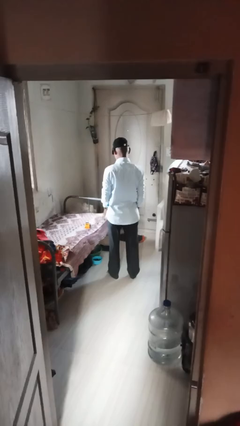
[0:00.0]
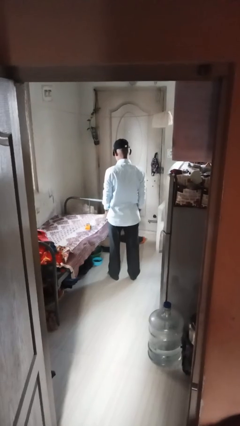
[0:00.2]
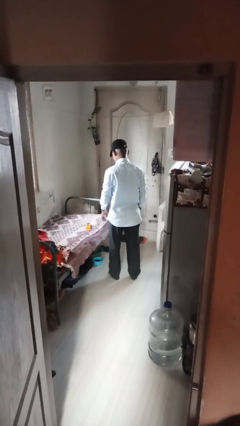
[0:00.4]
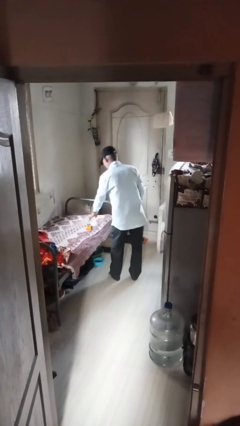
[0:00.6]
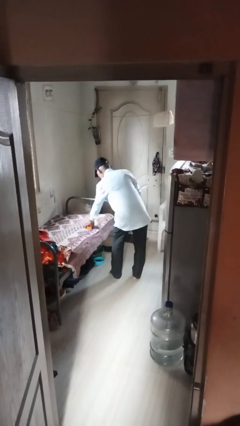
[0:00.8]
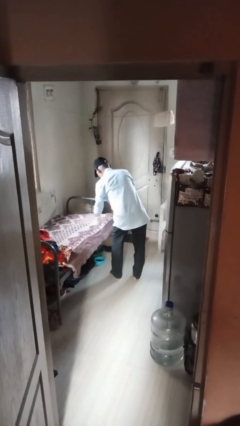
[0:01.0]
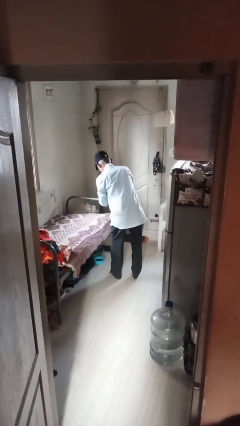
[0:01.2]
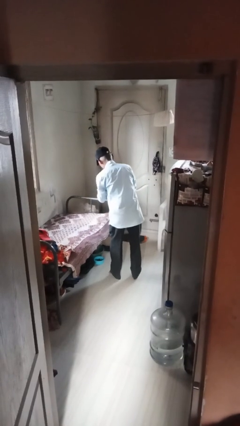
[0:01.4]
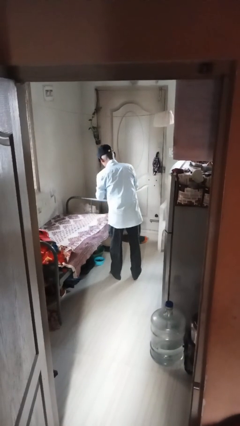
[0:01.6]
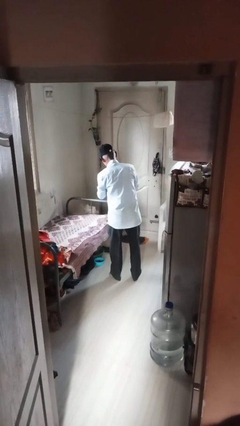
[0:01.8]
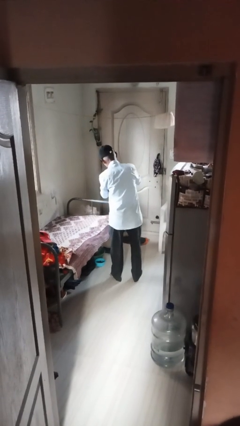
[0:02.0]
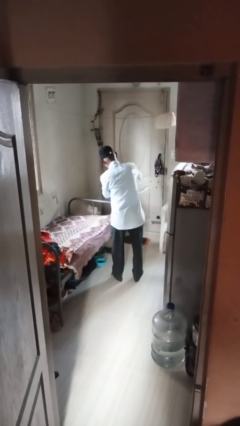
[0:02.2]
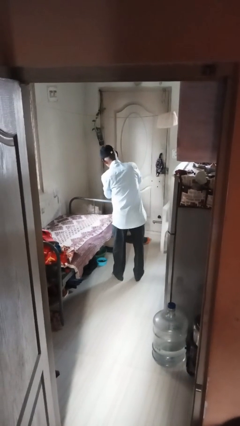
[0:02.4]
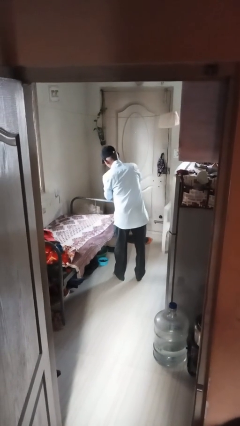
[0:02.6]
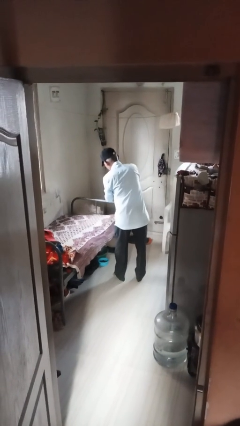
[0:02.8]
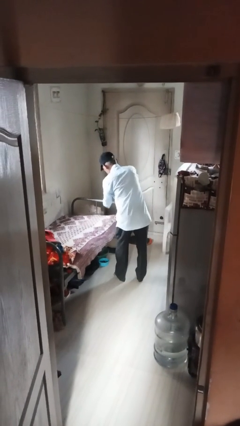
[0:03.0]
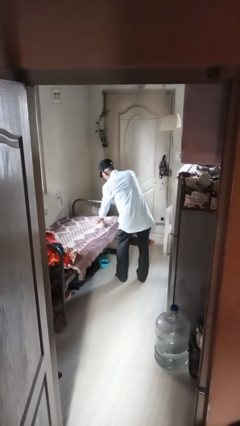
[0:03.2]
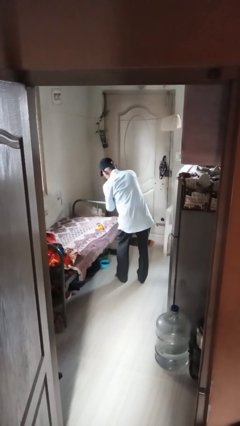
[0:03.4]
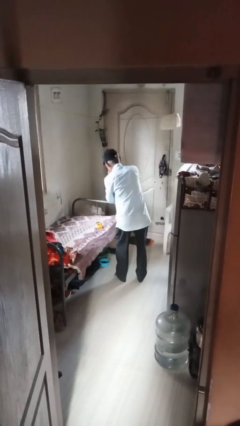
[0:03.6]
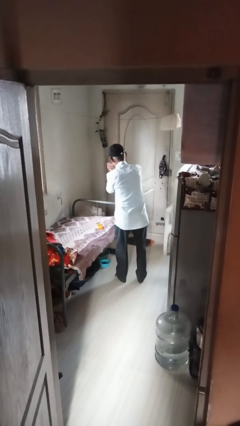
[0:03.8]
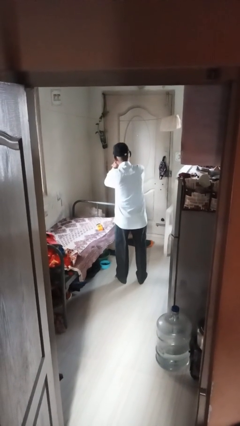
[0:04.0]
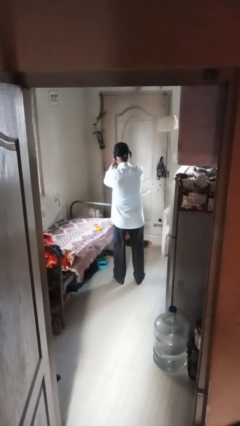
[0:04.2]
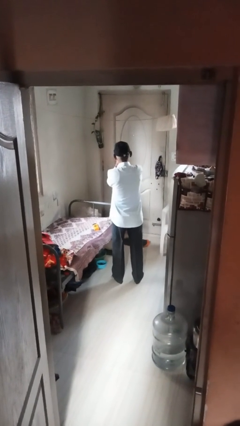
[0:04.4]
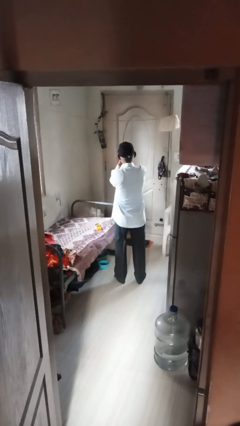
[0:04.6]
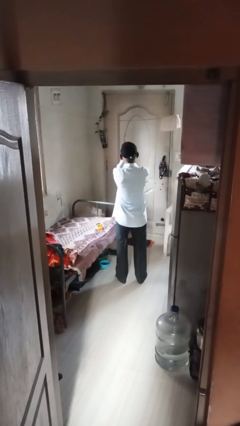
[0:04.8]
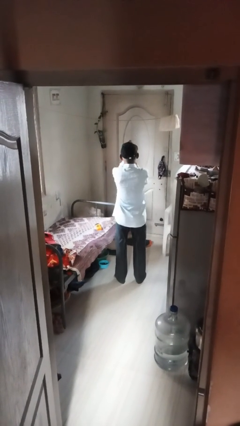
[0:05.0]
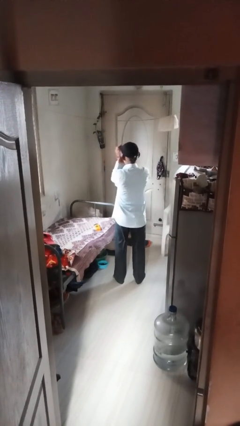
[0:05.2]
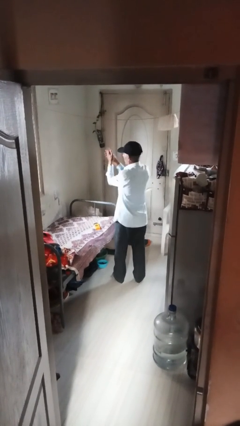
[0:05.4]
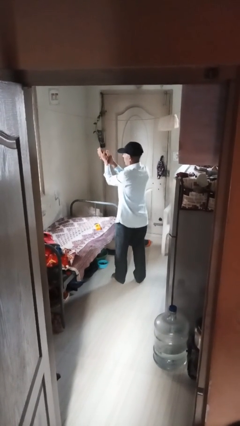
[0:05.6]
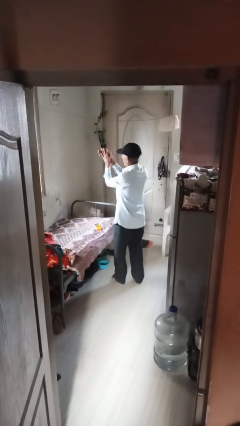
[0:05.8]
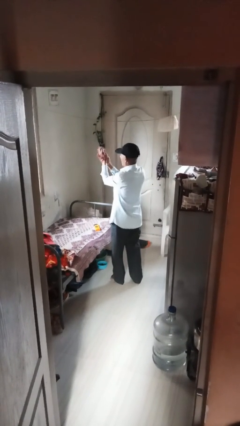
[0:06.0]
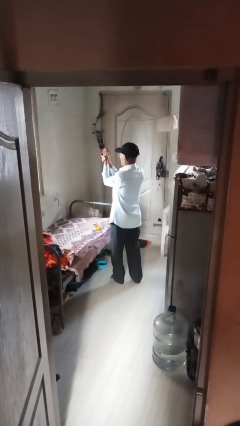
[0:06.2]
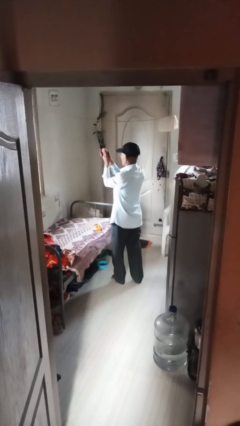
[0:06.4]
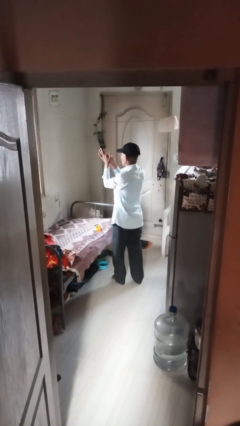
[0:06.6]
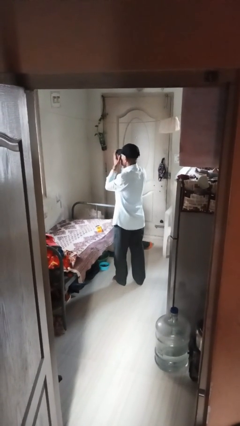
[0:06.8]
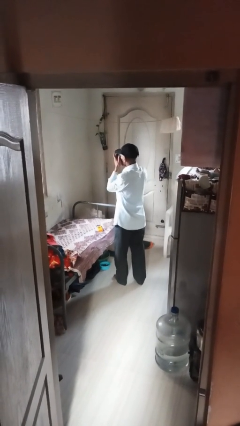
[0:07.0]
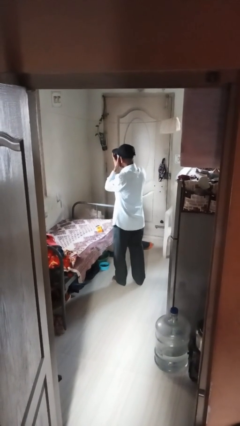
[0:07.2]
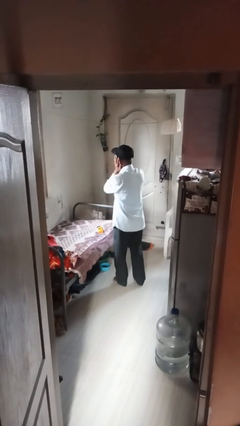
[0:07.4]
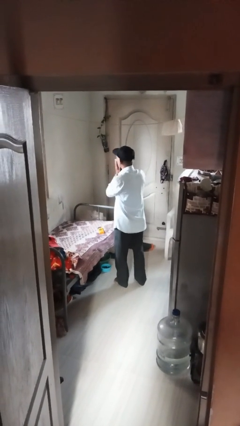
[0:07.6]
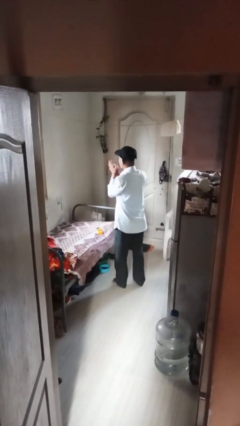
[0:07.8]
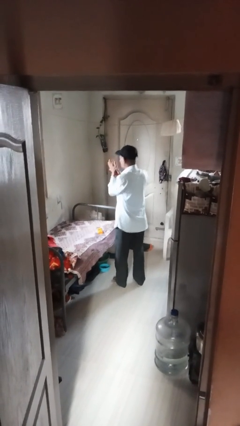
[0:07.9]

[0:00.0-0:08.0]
person applies sunscreen

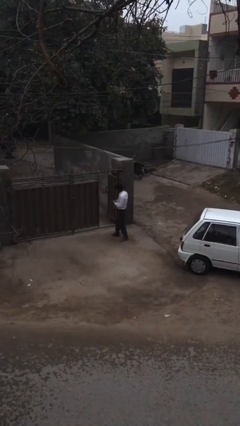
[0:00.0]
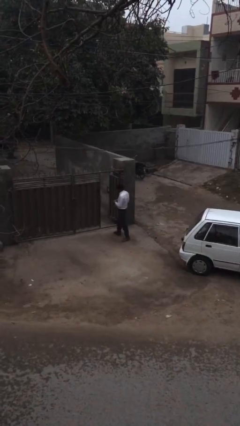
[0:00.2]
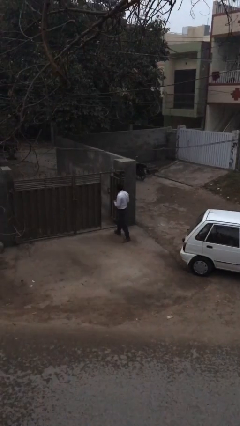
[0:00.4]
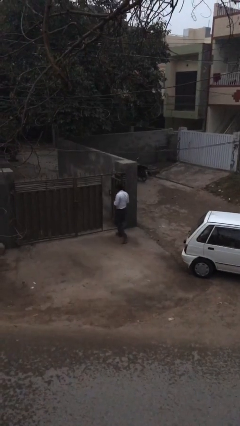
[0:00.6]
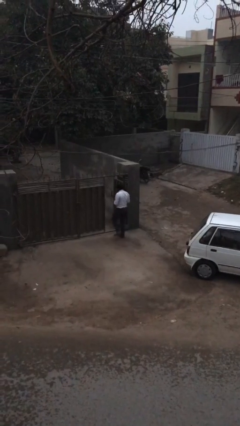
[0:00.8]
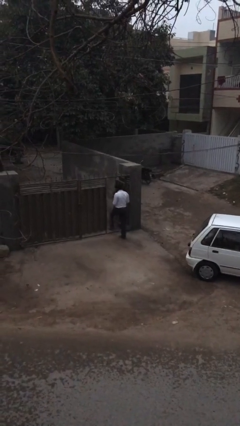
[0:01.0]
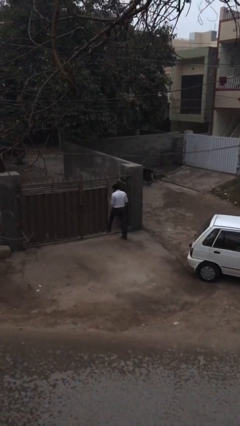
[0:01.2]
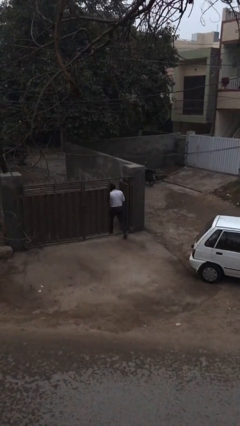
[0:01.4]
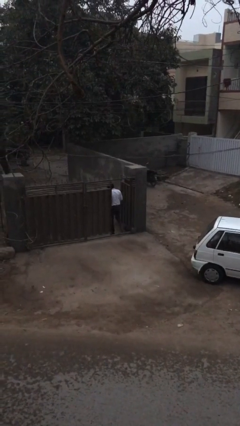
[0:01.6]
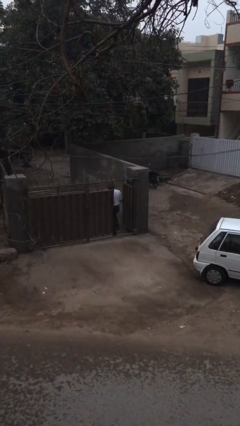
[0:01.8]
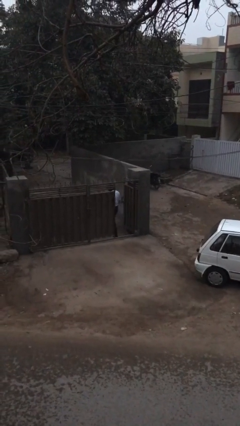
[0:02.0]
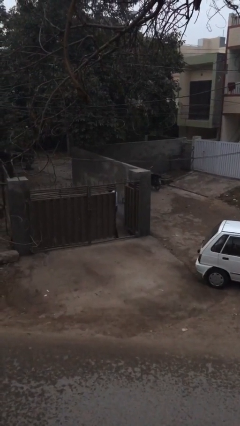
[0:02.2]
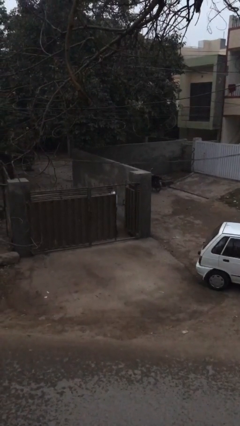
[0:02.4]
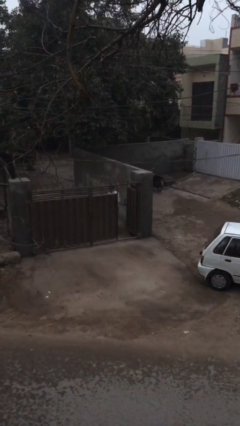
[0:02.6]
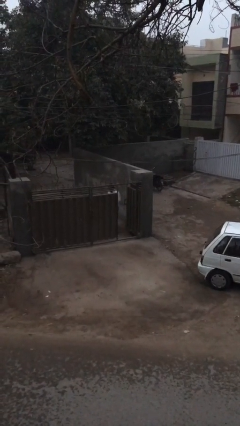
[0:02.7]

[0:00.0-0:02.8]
person exits scene through structure

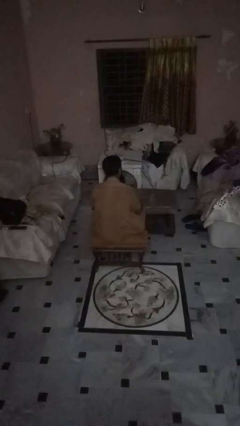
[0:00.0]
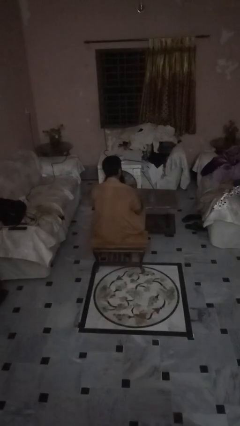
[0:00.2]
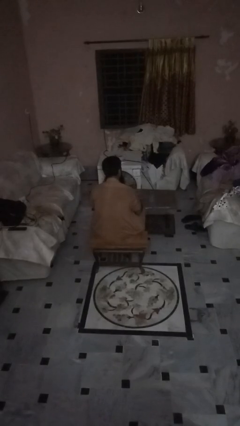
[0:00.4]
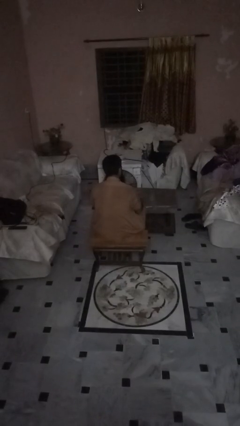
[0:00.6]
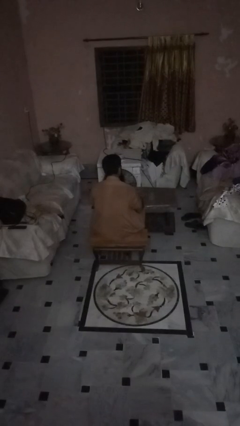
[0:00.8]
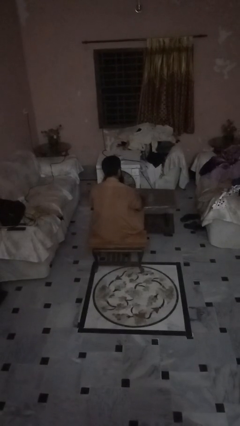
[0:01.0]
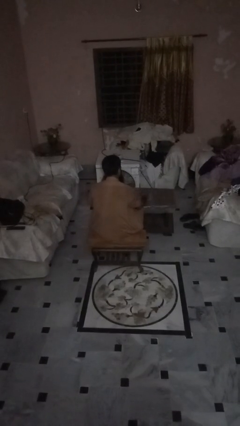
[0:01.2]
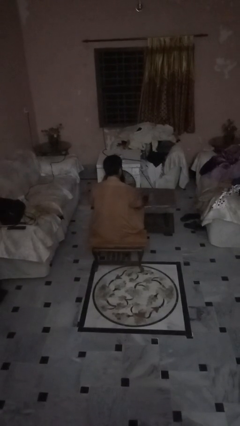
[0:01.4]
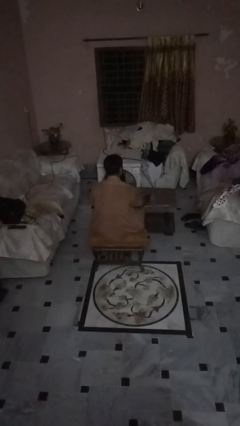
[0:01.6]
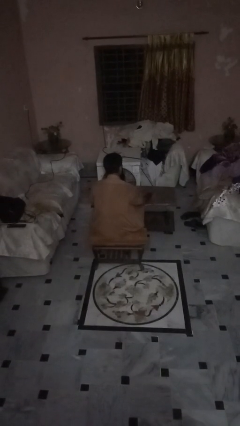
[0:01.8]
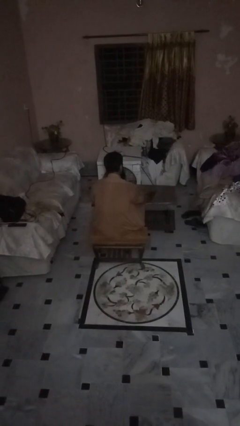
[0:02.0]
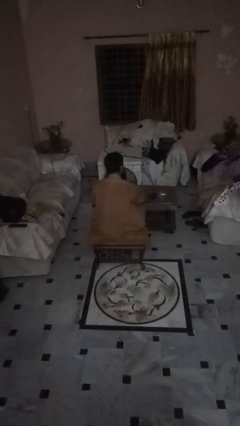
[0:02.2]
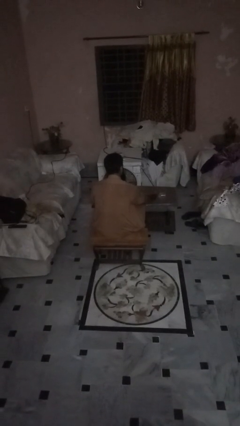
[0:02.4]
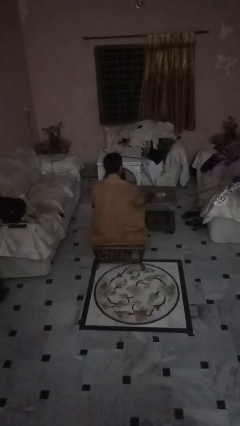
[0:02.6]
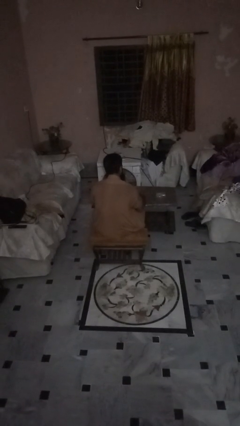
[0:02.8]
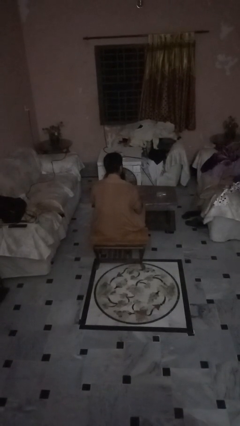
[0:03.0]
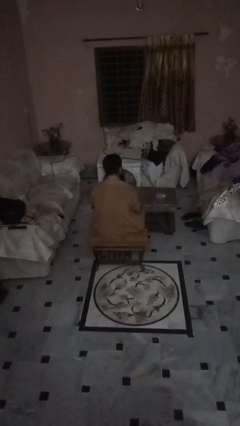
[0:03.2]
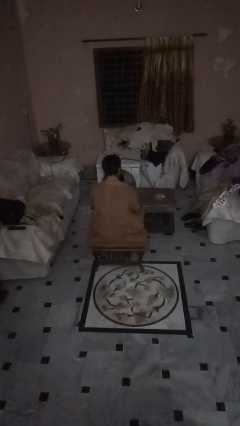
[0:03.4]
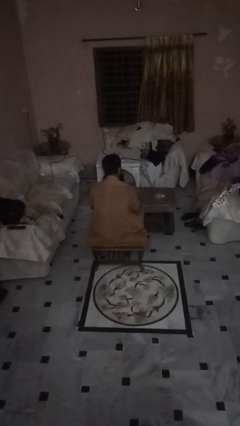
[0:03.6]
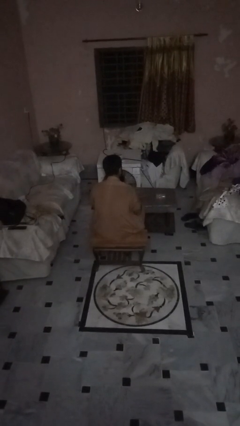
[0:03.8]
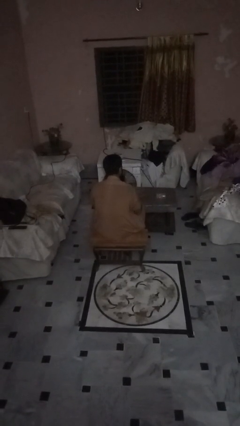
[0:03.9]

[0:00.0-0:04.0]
person knocks over glass

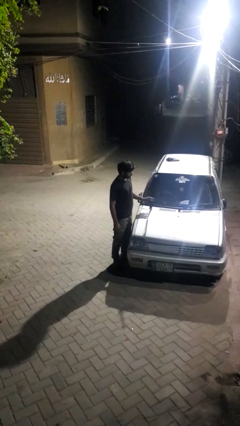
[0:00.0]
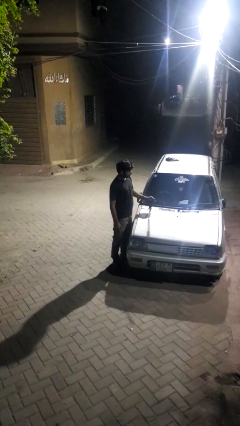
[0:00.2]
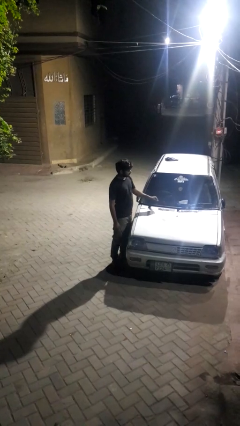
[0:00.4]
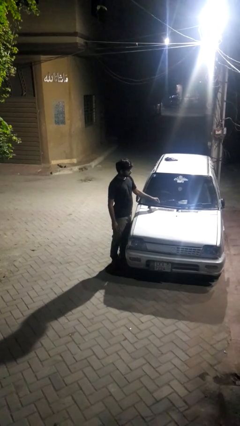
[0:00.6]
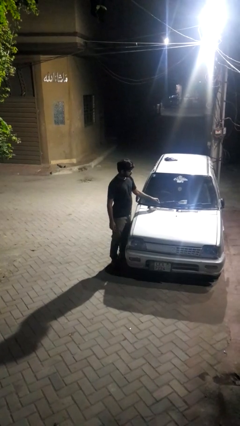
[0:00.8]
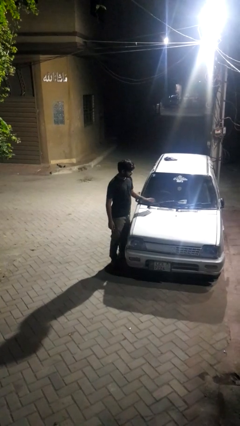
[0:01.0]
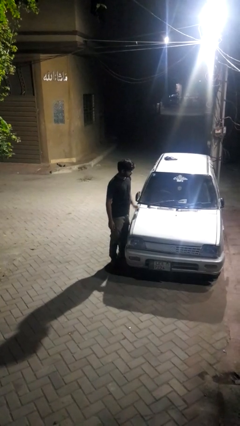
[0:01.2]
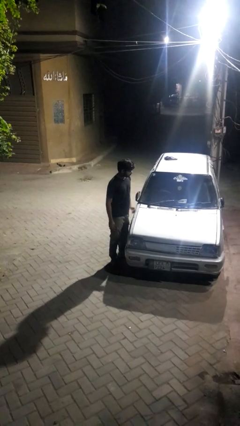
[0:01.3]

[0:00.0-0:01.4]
person flips down car wipers

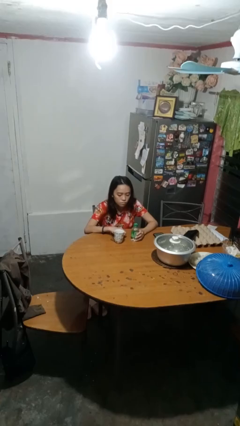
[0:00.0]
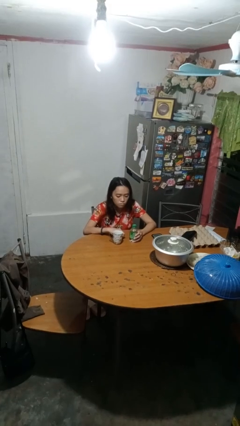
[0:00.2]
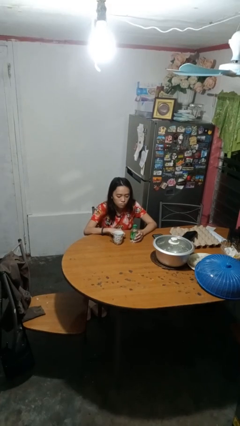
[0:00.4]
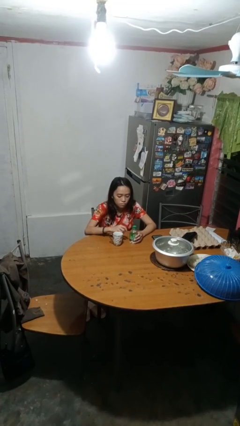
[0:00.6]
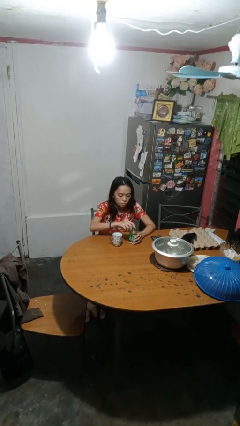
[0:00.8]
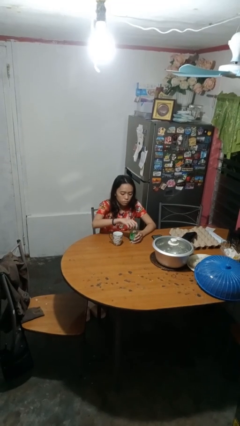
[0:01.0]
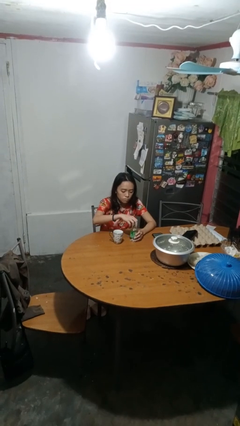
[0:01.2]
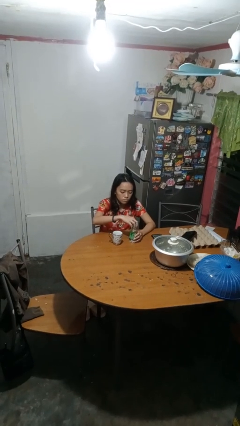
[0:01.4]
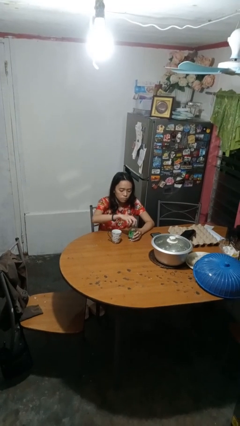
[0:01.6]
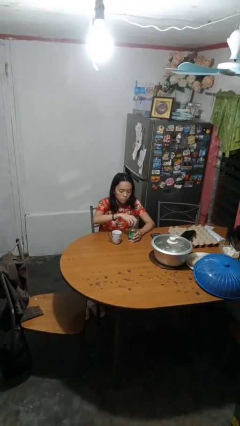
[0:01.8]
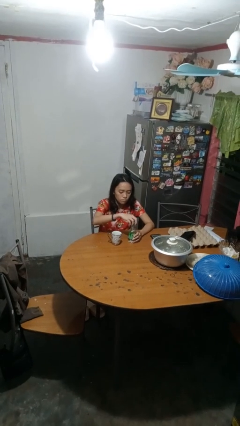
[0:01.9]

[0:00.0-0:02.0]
person unscrews lid from bottle
